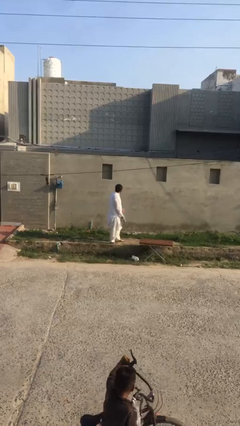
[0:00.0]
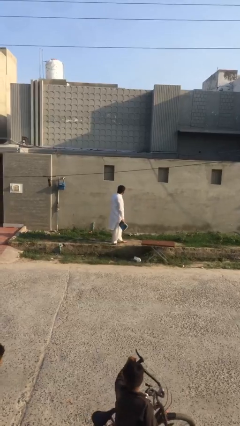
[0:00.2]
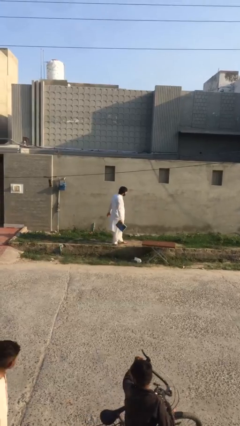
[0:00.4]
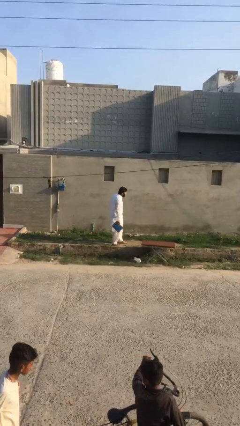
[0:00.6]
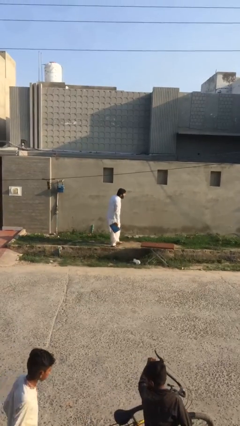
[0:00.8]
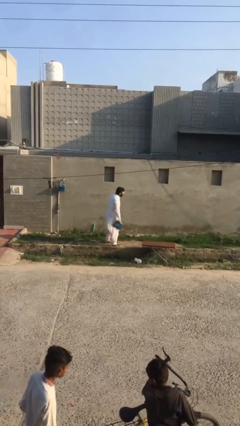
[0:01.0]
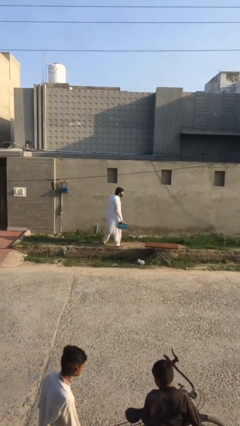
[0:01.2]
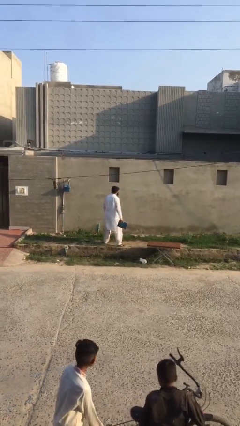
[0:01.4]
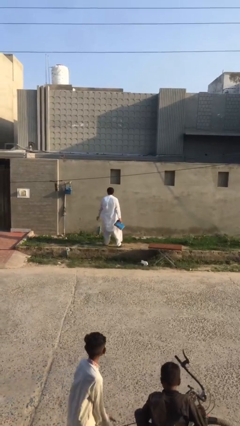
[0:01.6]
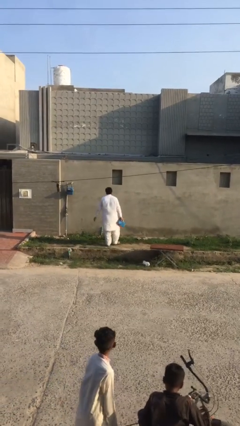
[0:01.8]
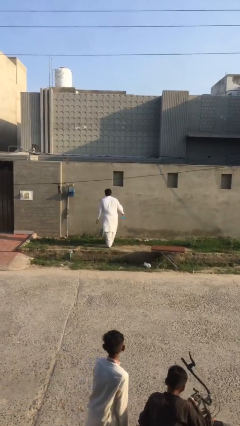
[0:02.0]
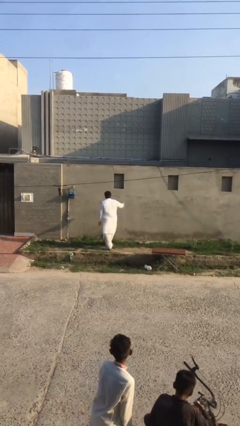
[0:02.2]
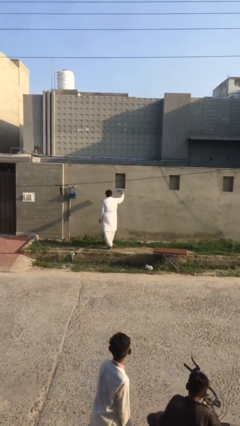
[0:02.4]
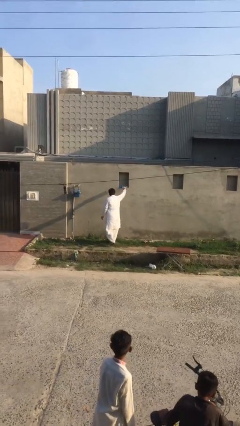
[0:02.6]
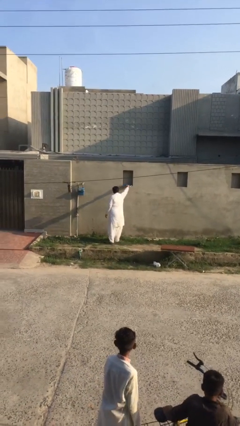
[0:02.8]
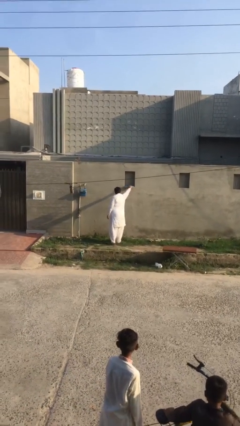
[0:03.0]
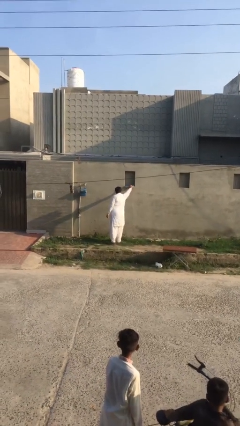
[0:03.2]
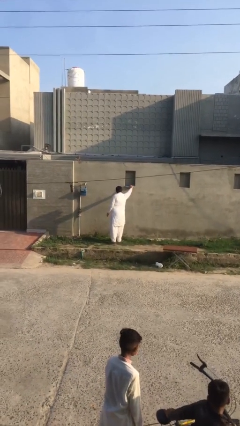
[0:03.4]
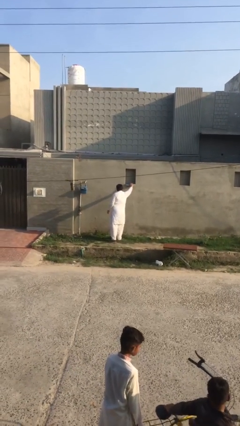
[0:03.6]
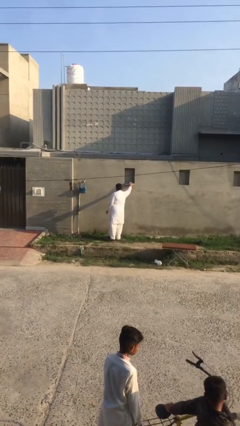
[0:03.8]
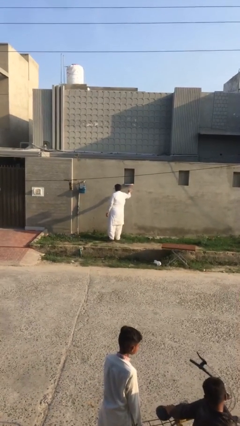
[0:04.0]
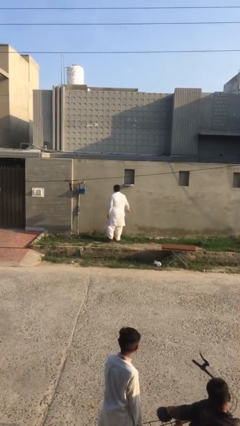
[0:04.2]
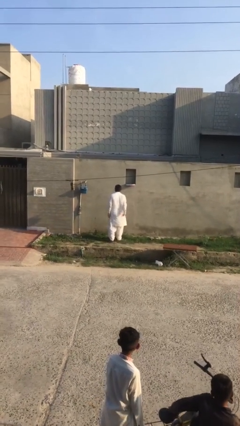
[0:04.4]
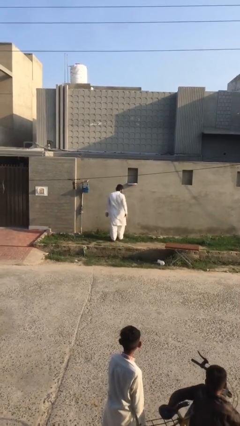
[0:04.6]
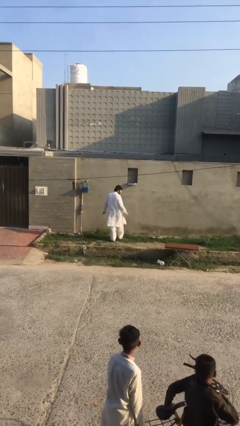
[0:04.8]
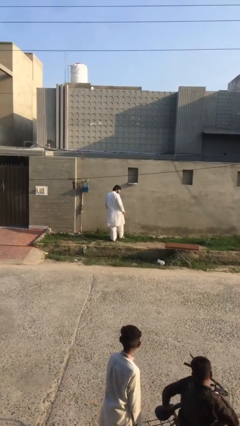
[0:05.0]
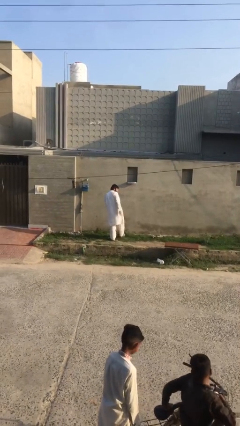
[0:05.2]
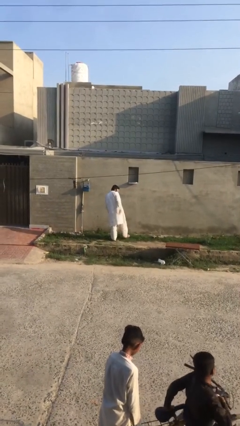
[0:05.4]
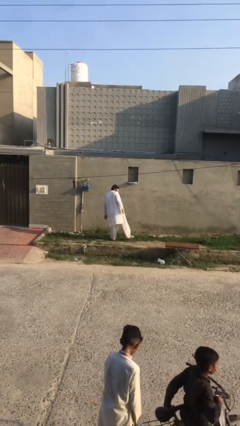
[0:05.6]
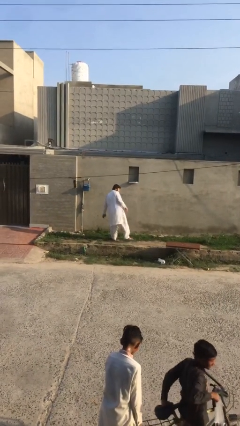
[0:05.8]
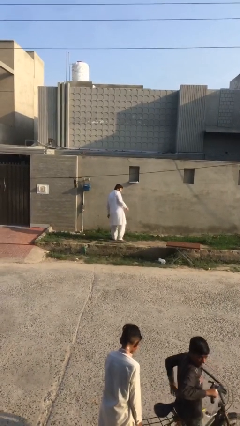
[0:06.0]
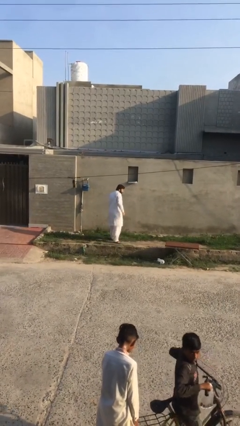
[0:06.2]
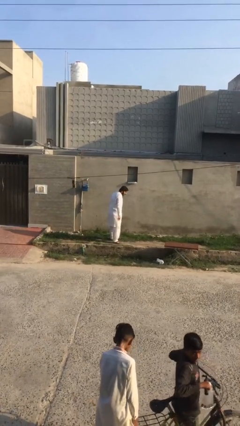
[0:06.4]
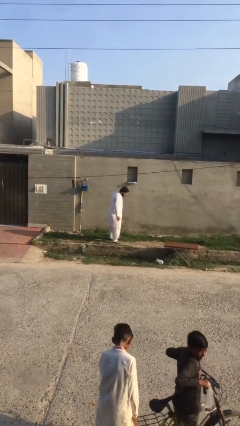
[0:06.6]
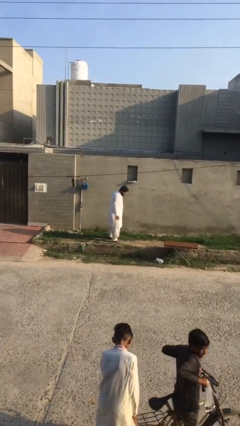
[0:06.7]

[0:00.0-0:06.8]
person puts down object on shelf

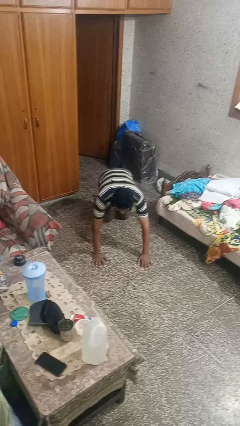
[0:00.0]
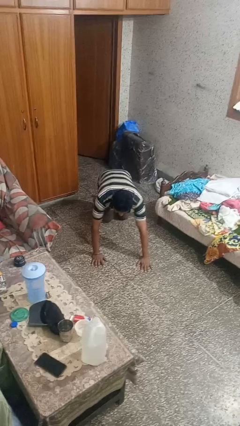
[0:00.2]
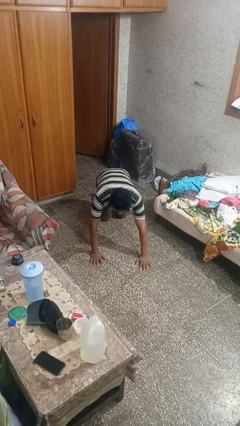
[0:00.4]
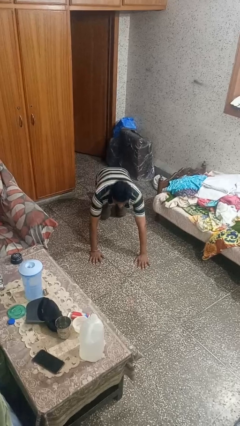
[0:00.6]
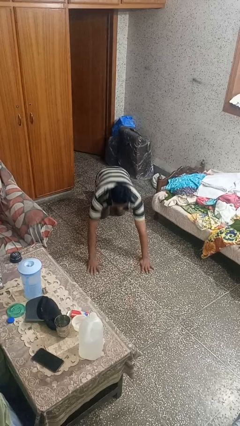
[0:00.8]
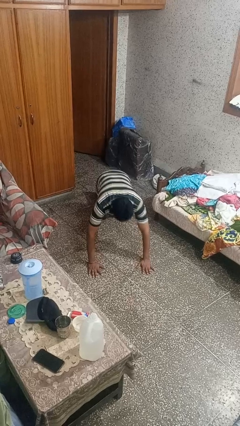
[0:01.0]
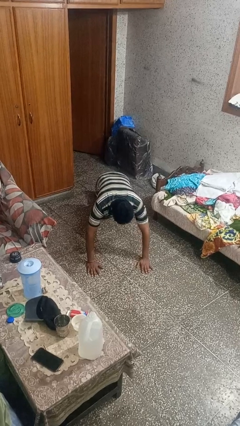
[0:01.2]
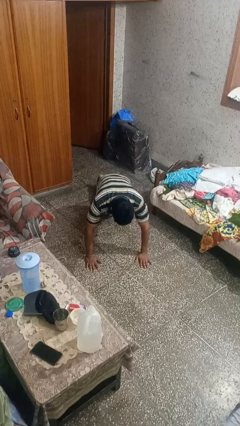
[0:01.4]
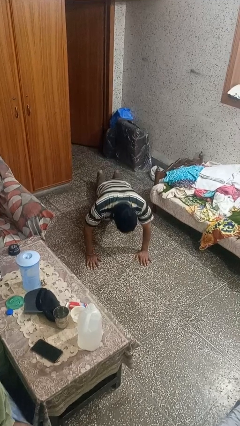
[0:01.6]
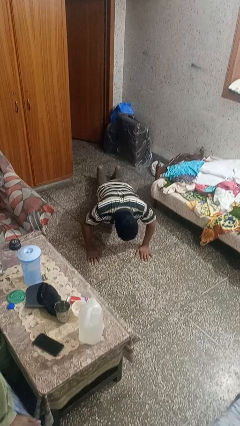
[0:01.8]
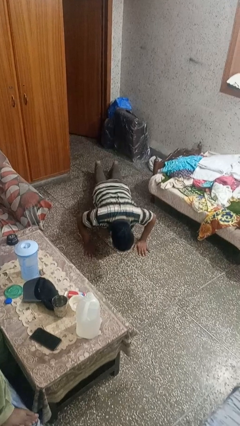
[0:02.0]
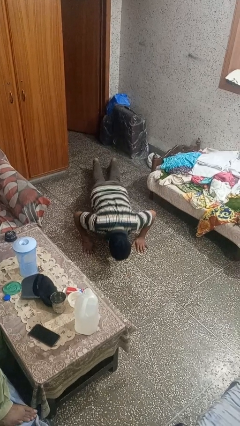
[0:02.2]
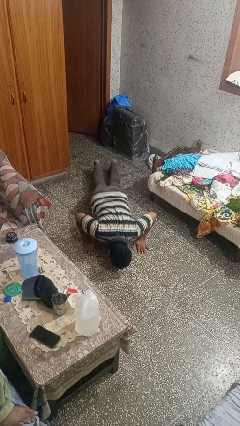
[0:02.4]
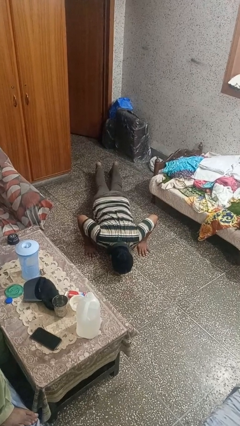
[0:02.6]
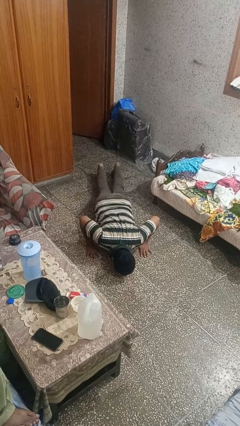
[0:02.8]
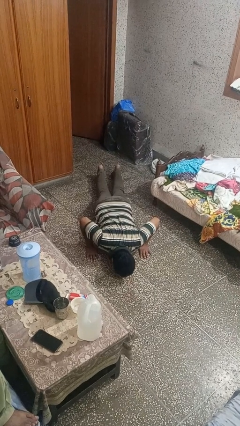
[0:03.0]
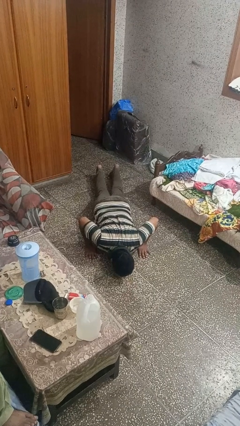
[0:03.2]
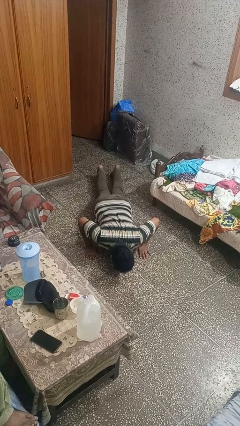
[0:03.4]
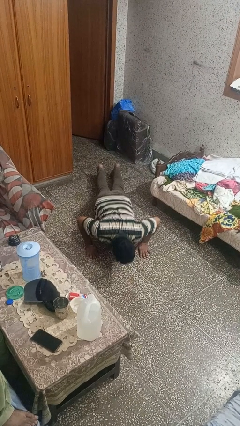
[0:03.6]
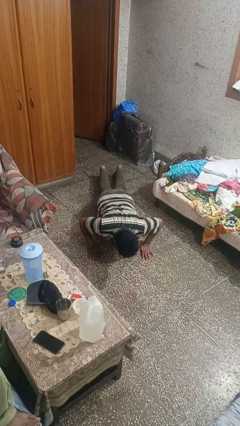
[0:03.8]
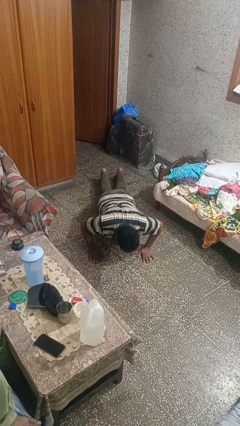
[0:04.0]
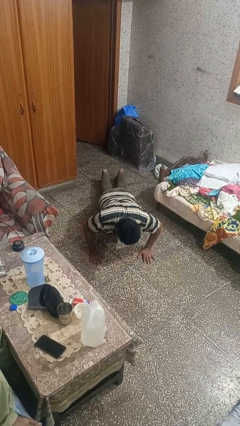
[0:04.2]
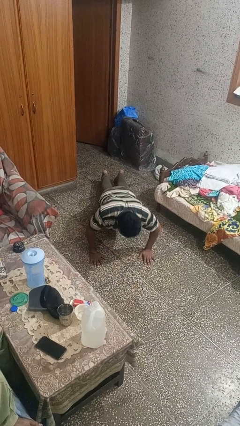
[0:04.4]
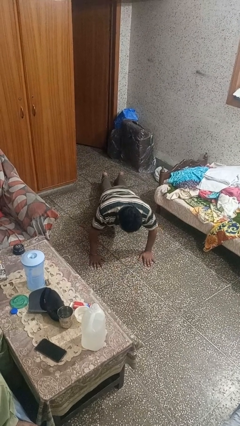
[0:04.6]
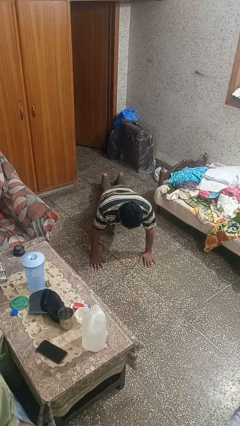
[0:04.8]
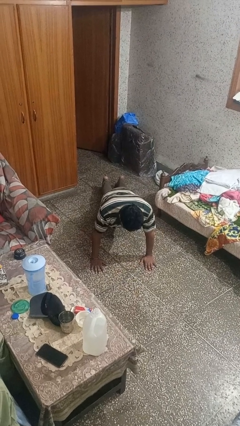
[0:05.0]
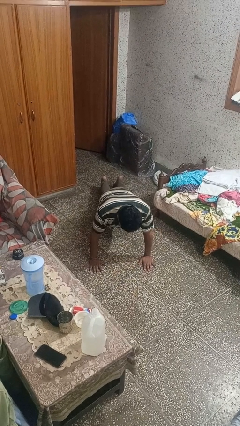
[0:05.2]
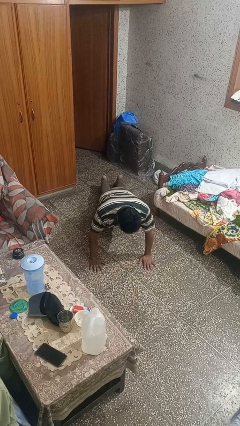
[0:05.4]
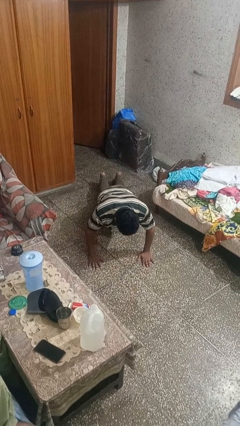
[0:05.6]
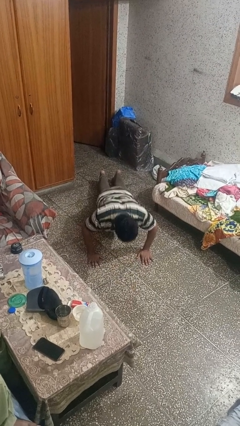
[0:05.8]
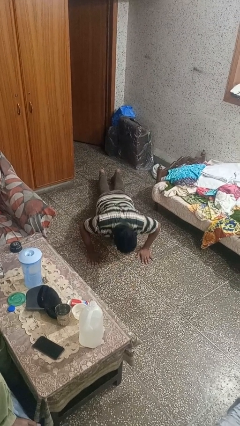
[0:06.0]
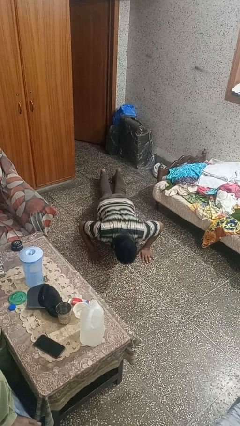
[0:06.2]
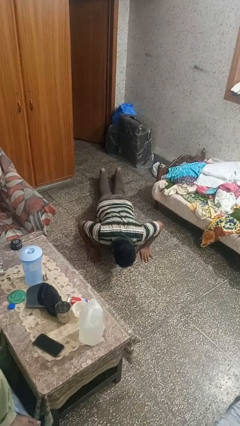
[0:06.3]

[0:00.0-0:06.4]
person exercises with pushup

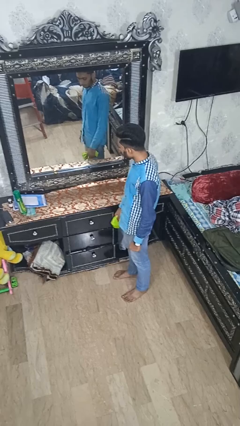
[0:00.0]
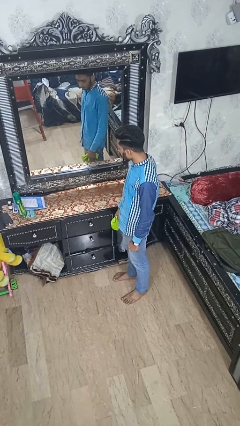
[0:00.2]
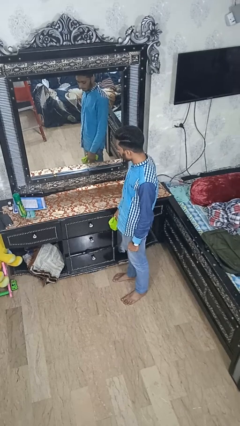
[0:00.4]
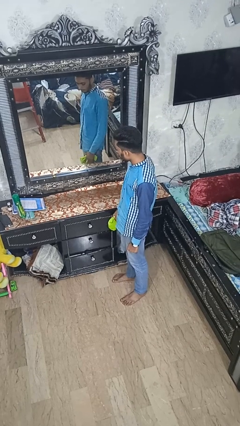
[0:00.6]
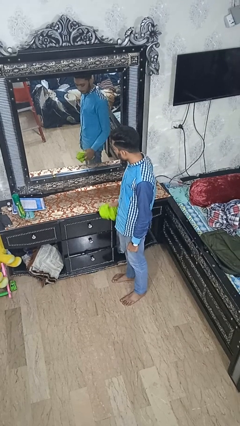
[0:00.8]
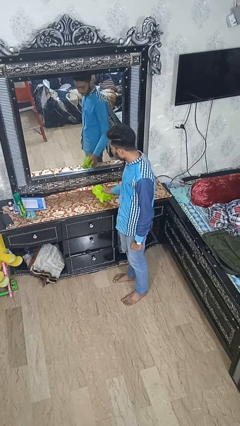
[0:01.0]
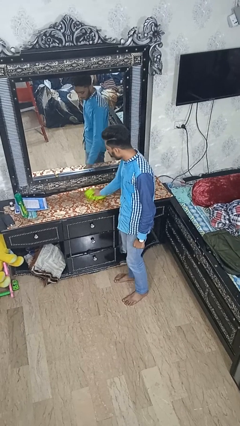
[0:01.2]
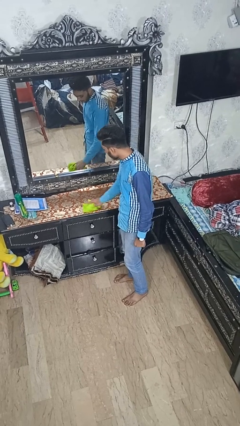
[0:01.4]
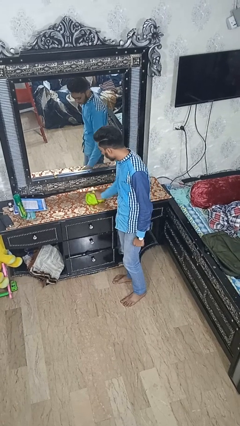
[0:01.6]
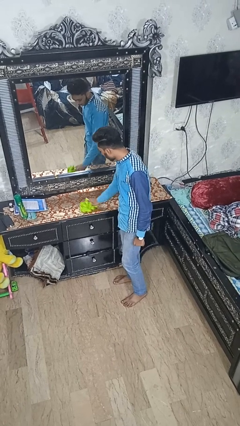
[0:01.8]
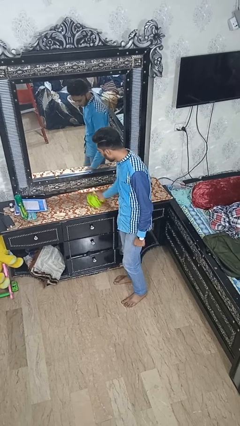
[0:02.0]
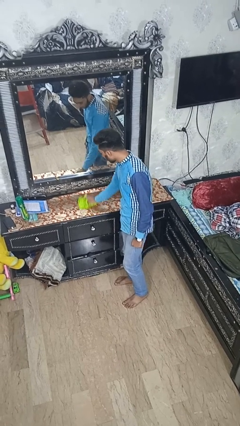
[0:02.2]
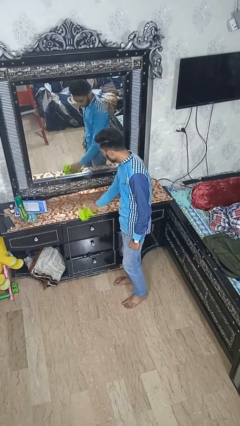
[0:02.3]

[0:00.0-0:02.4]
person cleans table with rag

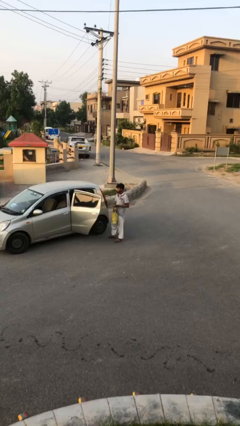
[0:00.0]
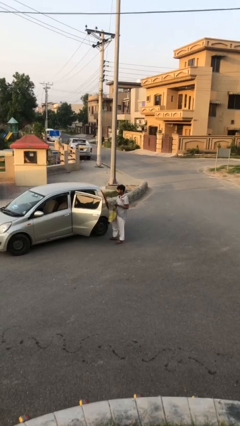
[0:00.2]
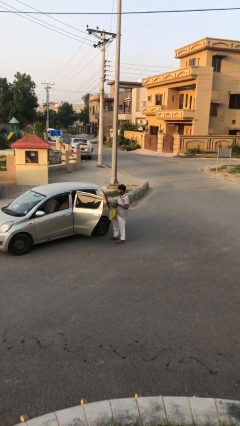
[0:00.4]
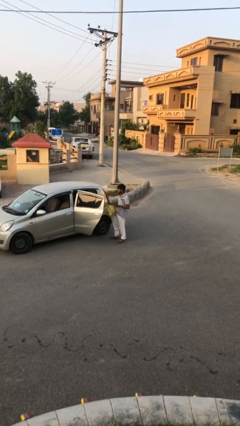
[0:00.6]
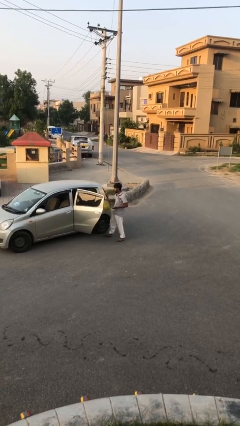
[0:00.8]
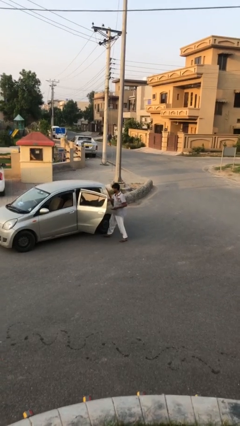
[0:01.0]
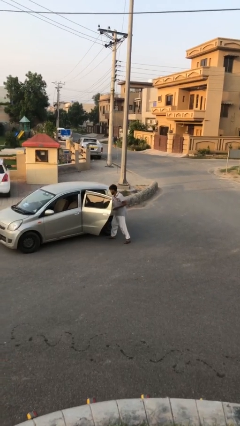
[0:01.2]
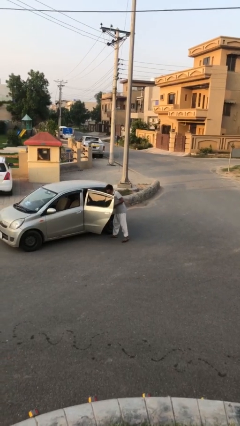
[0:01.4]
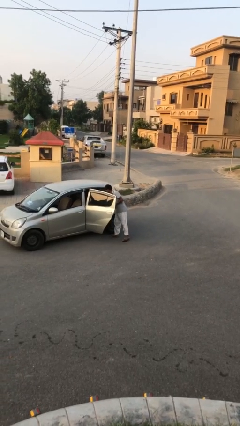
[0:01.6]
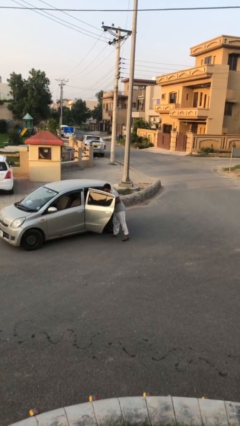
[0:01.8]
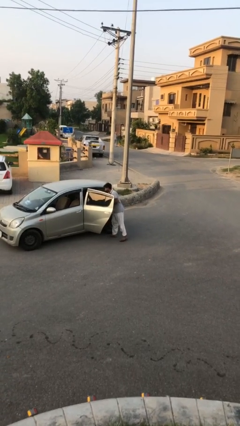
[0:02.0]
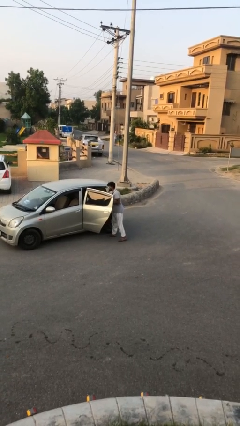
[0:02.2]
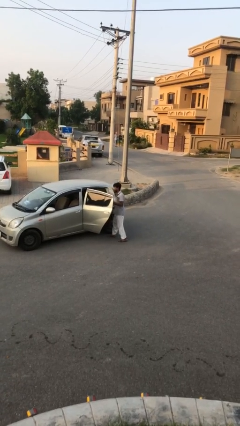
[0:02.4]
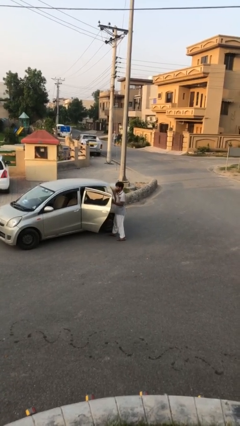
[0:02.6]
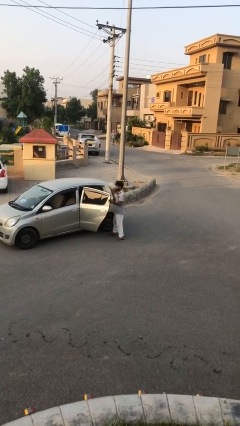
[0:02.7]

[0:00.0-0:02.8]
person loads car
